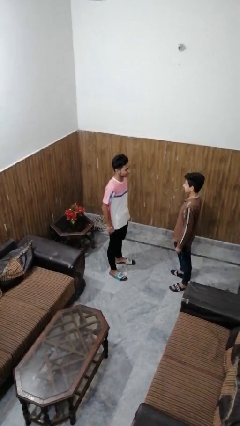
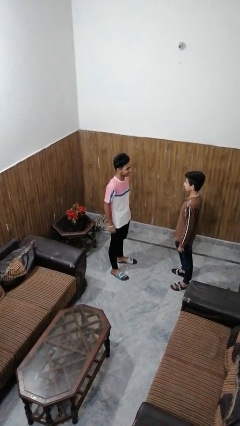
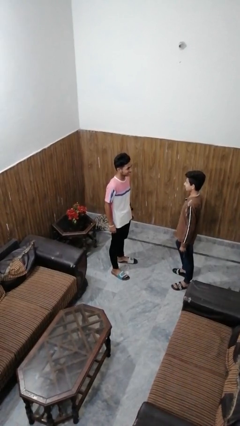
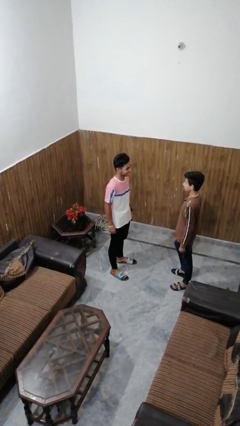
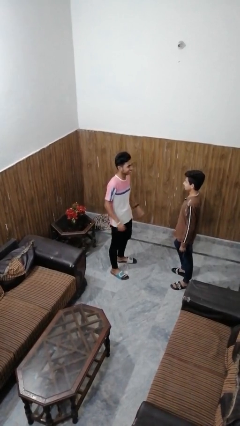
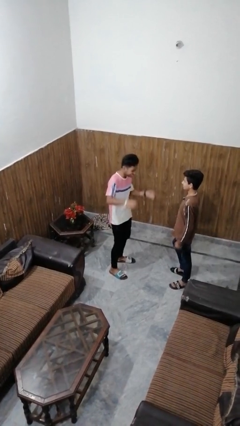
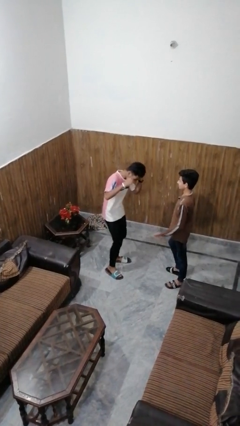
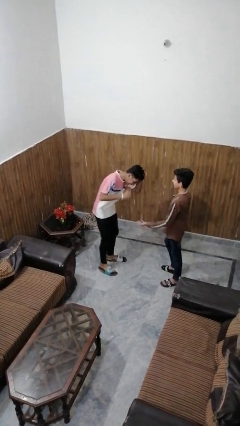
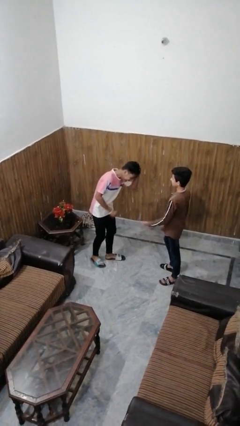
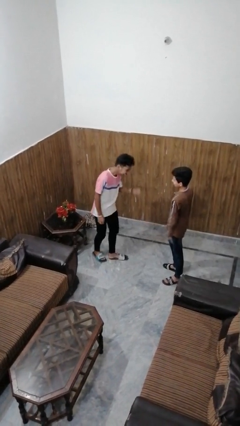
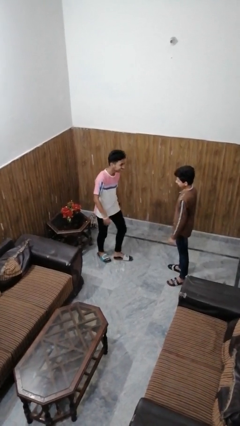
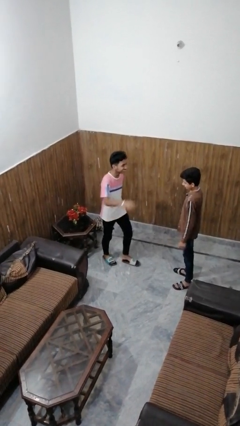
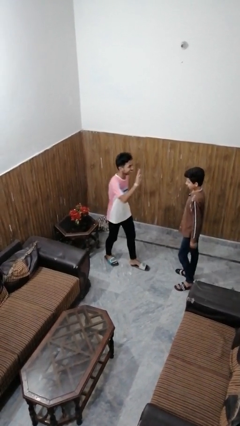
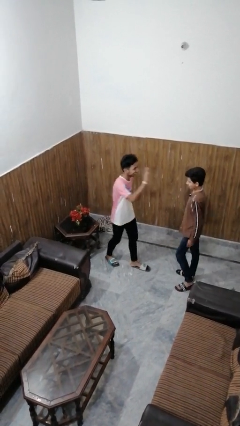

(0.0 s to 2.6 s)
person laughs with person

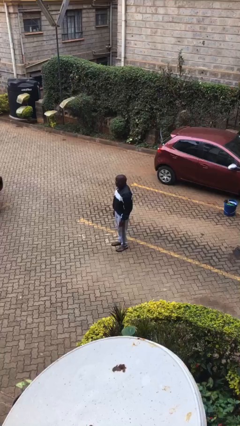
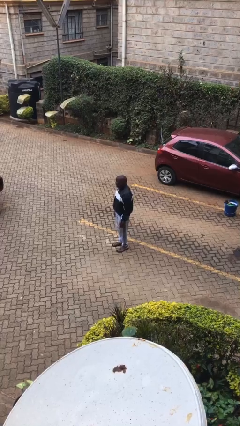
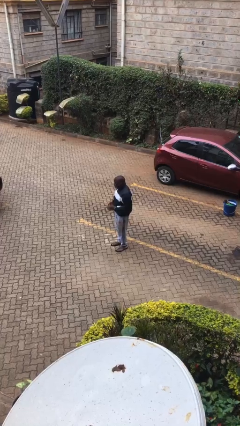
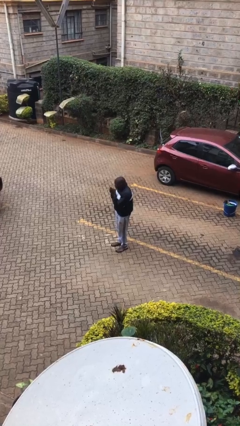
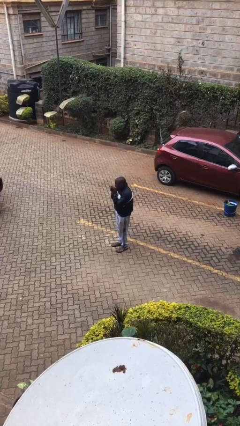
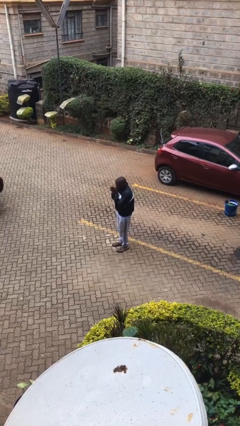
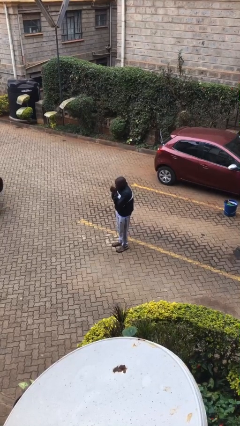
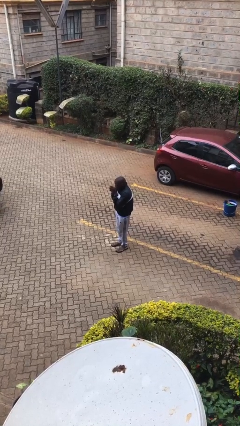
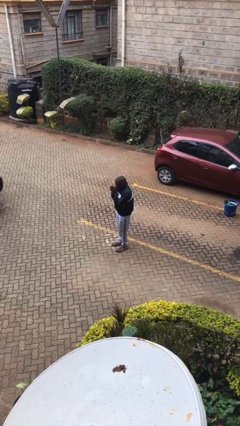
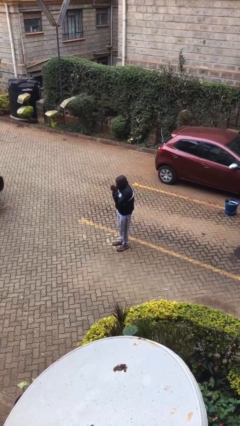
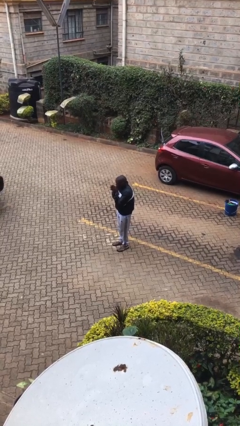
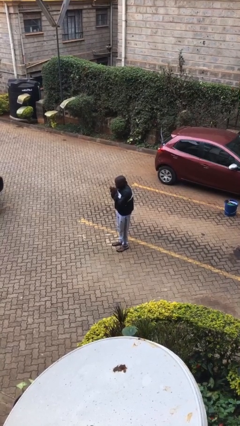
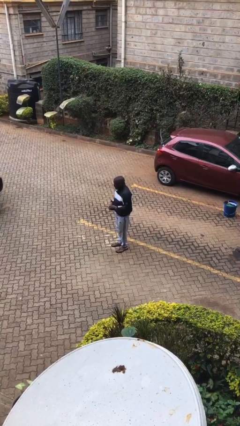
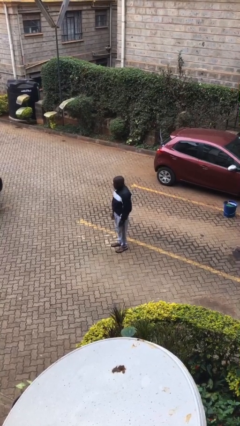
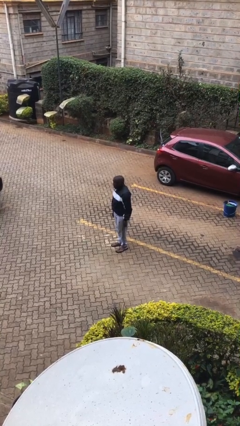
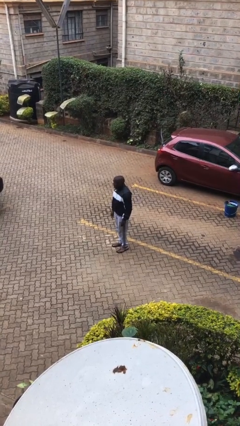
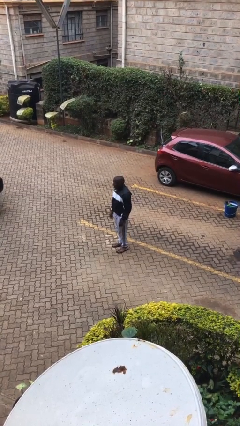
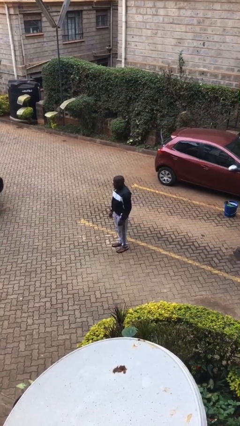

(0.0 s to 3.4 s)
person blows into hands

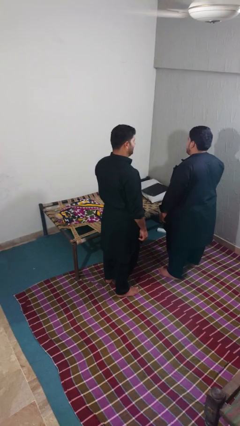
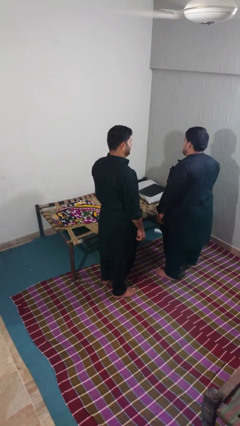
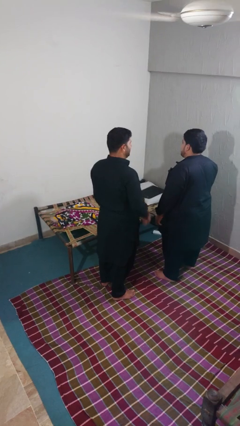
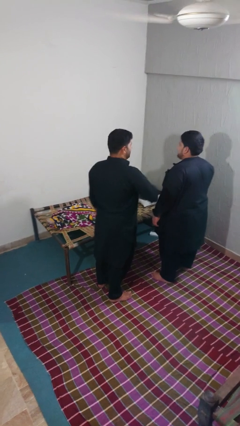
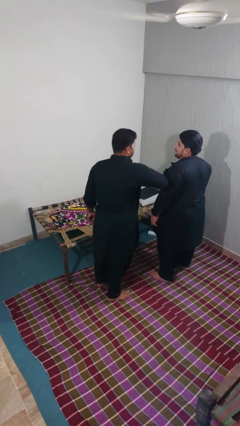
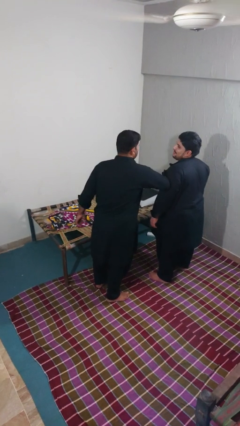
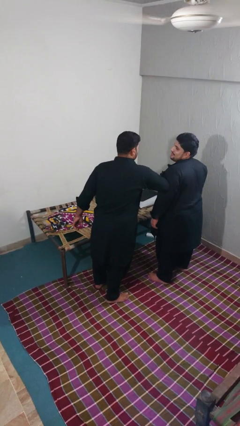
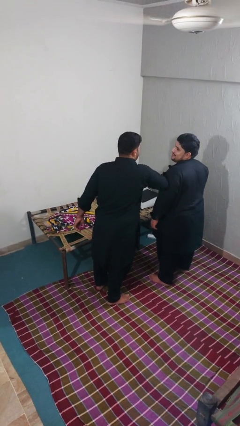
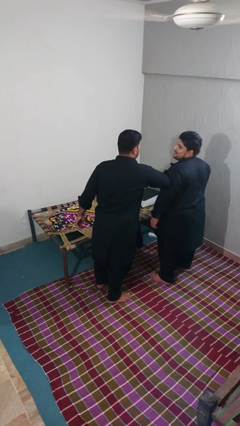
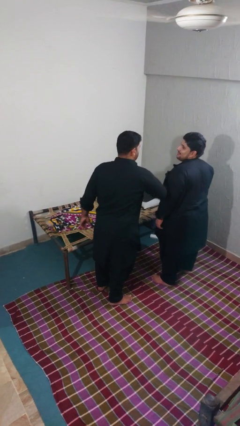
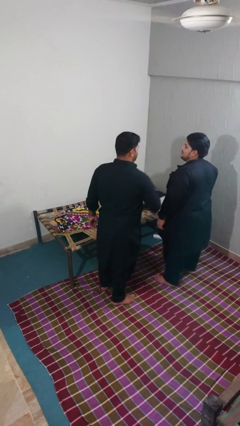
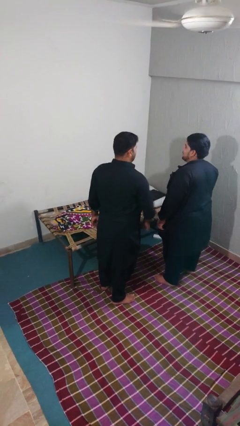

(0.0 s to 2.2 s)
person nudges person with elbow

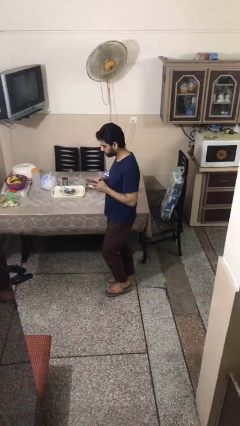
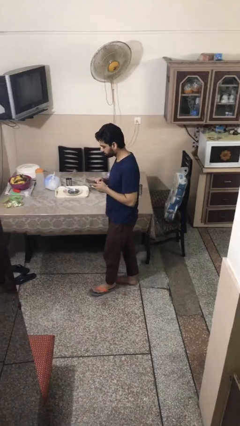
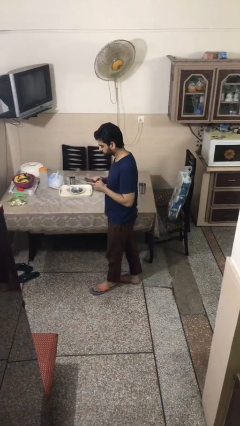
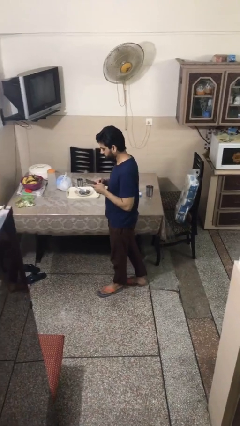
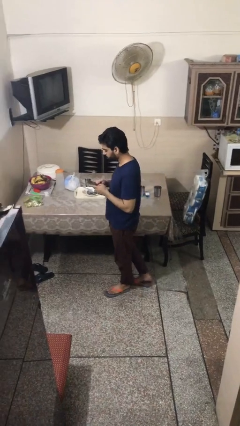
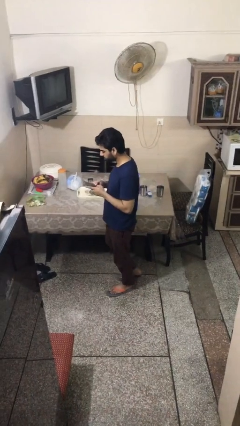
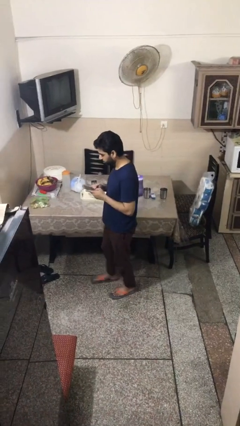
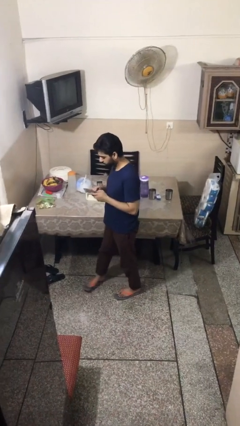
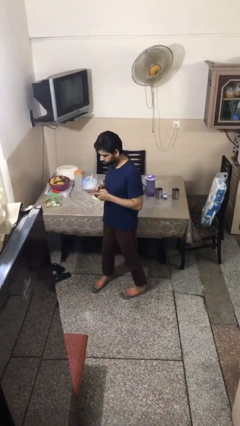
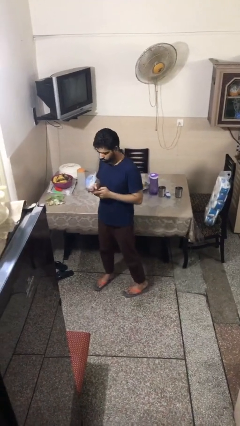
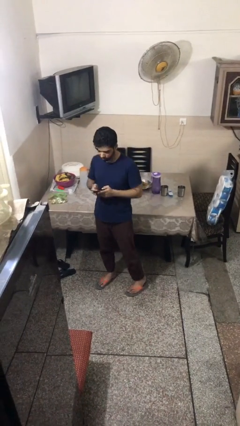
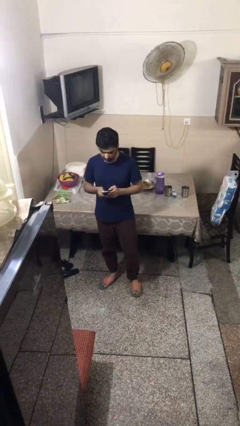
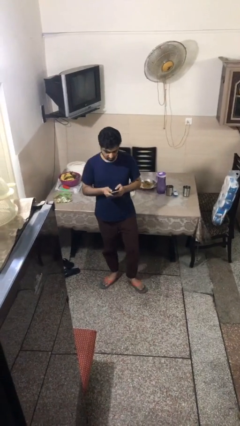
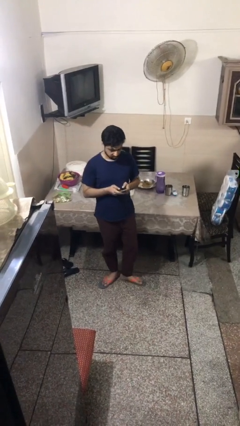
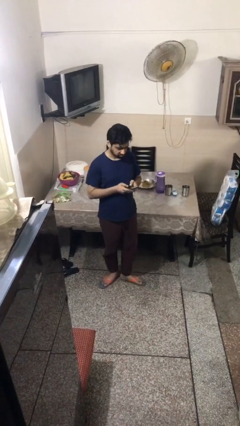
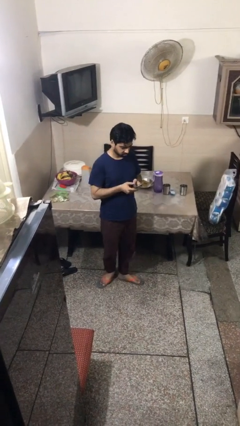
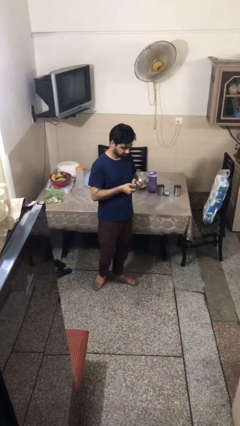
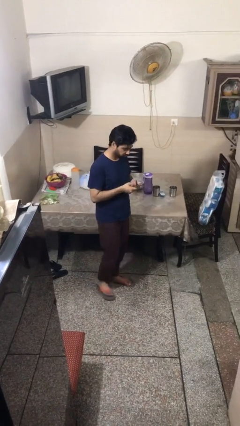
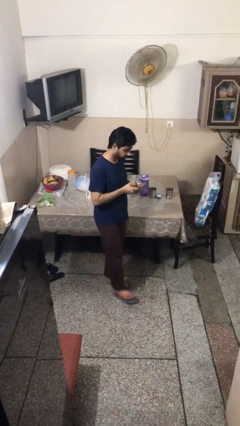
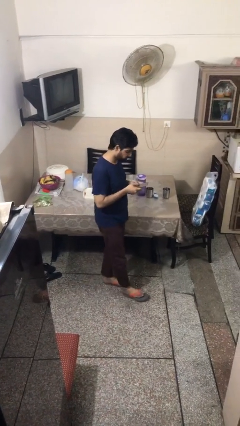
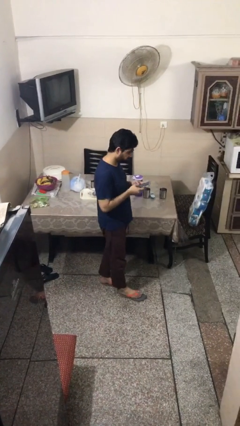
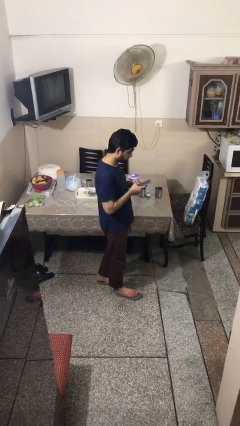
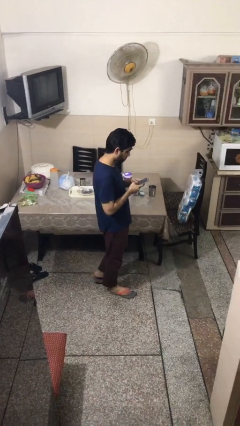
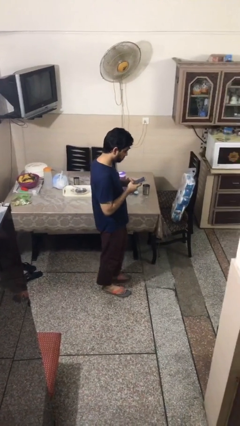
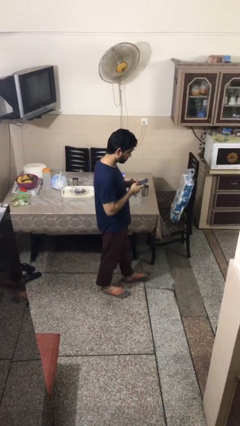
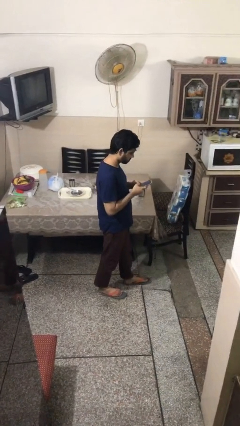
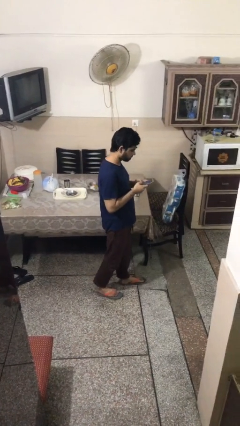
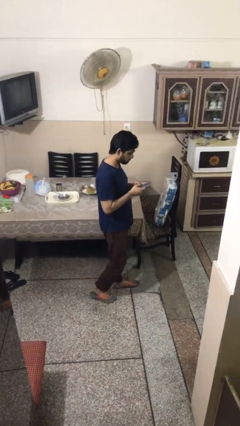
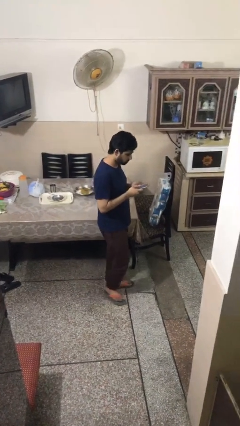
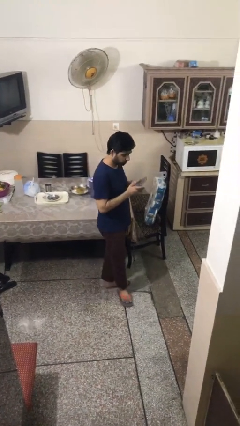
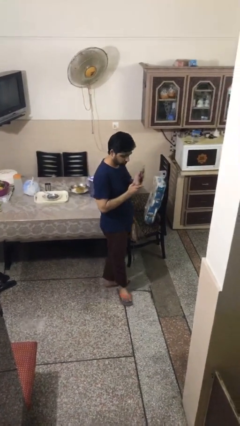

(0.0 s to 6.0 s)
person texts on phone

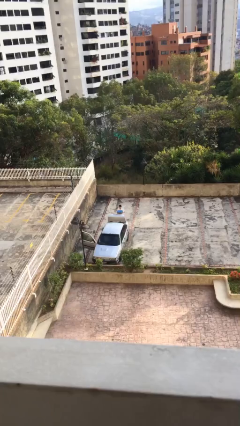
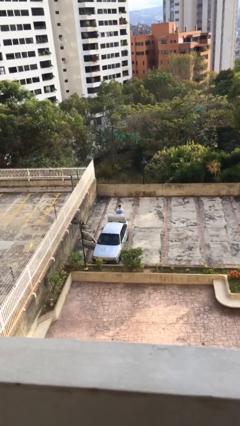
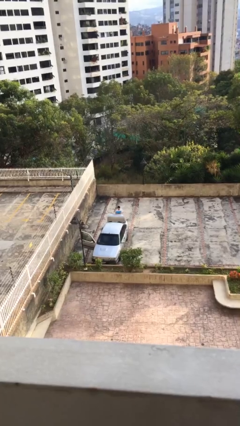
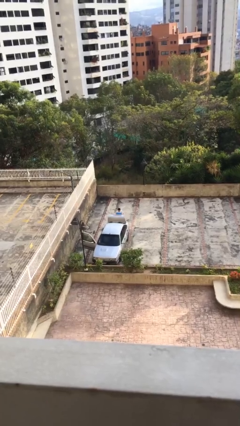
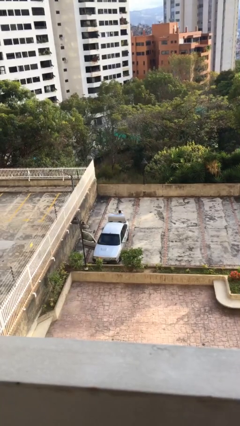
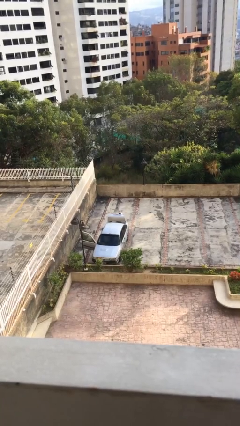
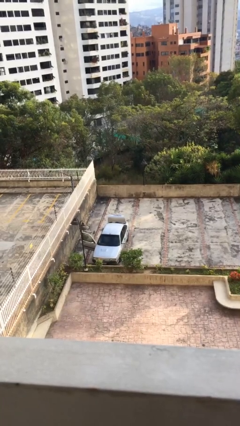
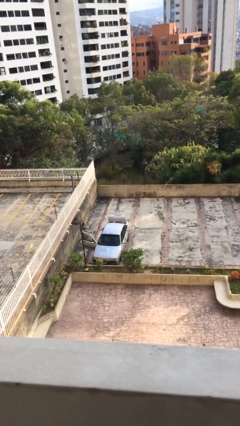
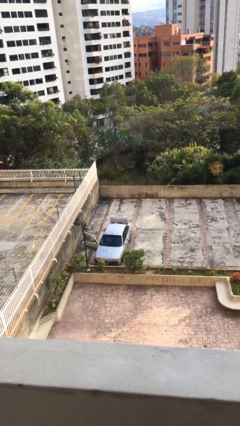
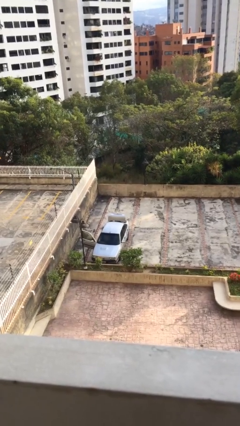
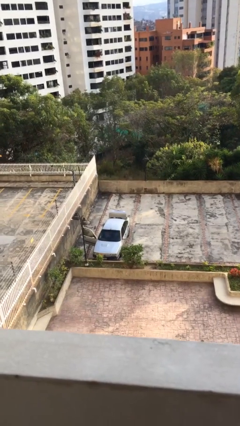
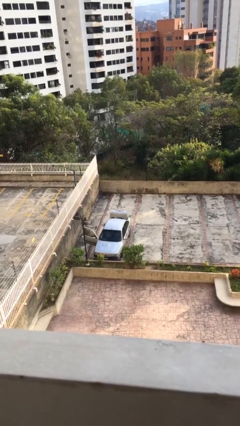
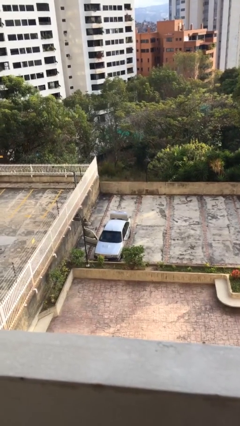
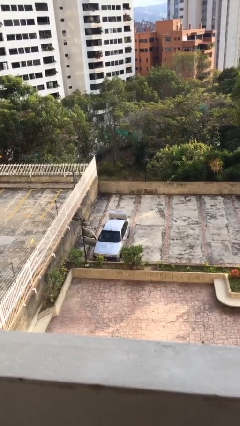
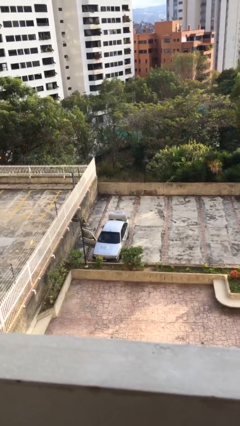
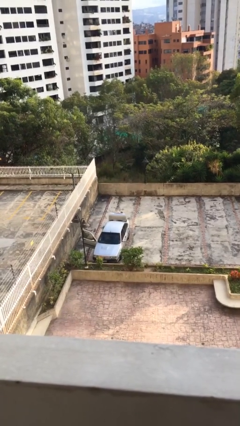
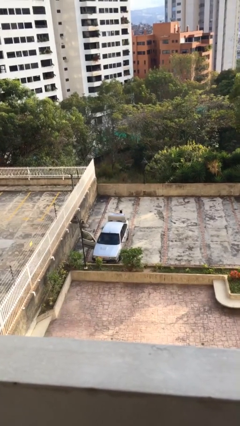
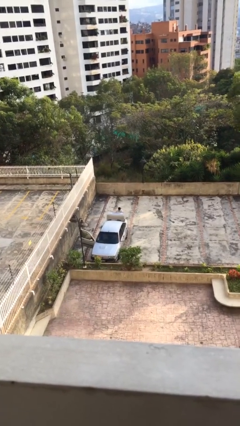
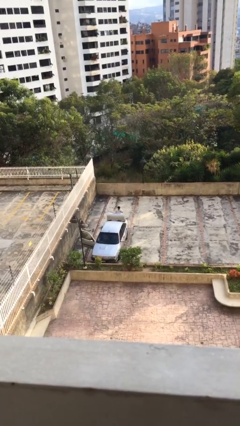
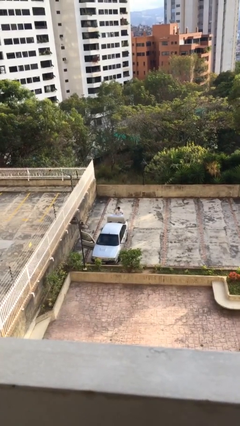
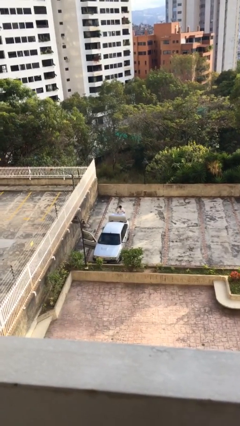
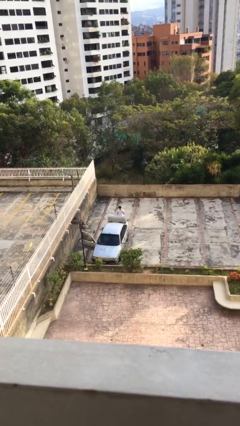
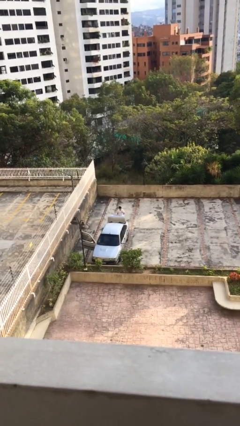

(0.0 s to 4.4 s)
person loads car
